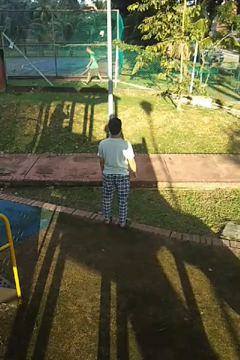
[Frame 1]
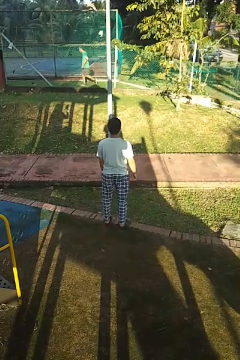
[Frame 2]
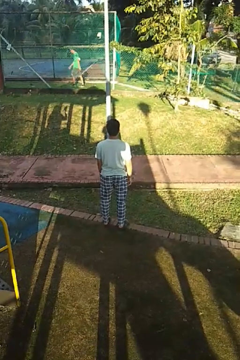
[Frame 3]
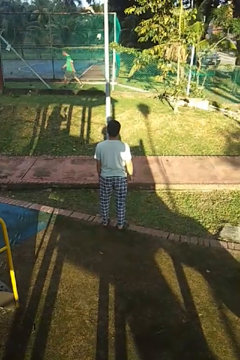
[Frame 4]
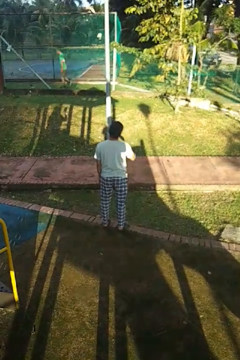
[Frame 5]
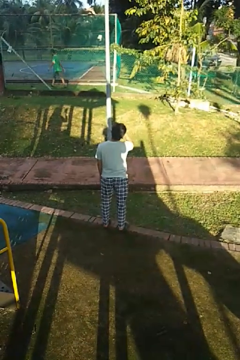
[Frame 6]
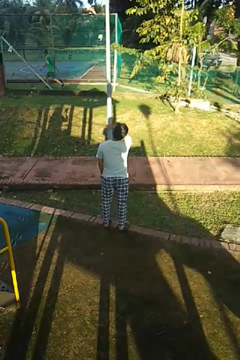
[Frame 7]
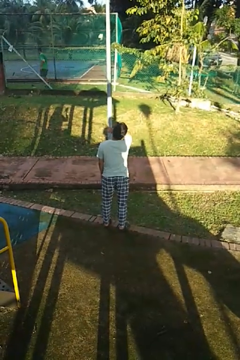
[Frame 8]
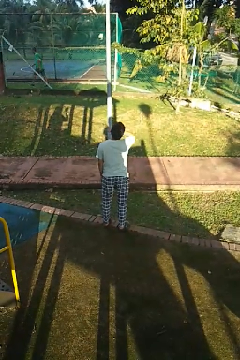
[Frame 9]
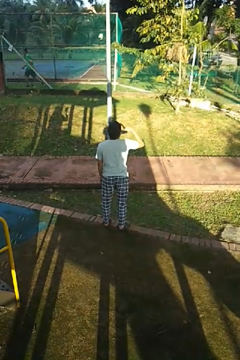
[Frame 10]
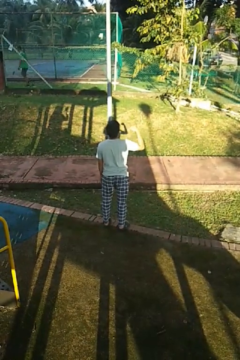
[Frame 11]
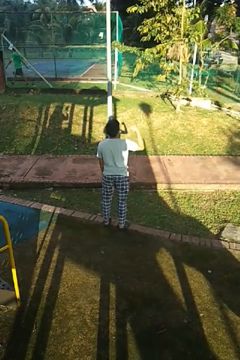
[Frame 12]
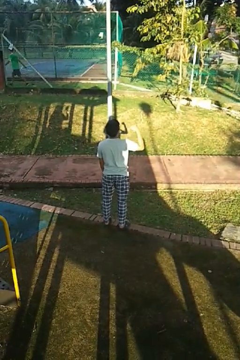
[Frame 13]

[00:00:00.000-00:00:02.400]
person gestures cut

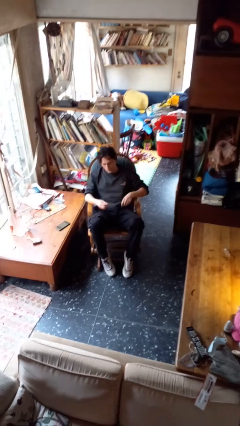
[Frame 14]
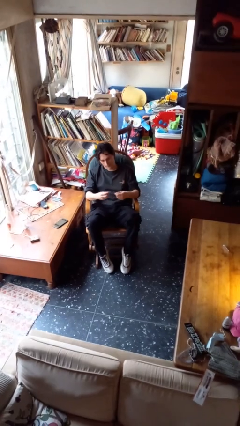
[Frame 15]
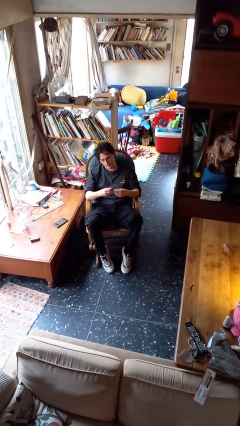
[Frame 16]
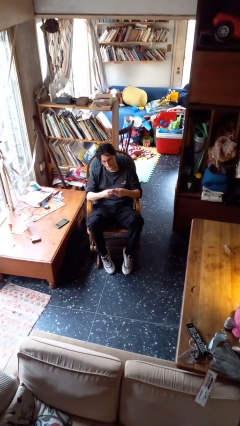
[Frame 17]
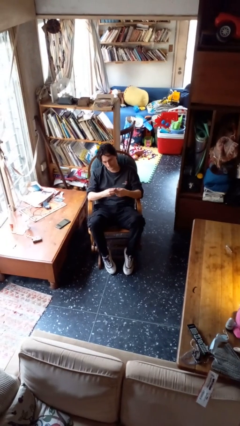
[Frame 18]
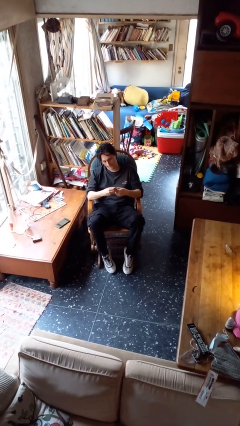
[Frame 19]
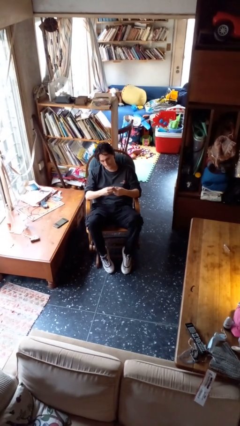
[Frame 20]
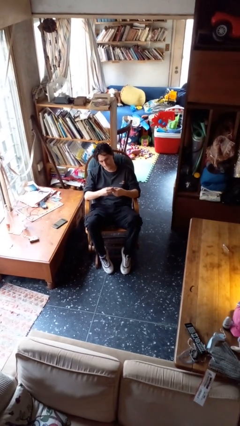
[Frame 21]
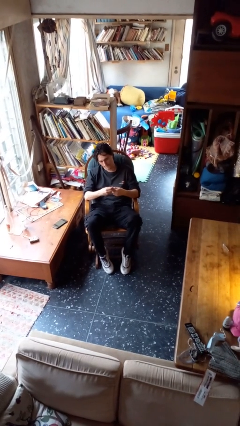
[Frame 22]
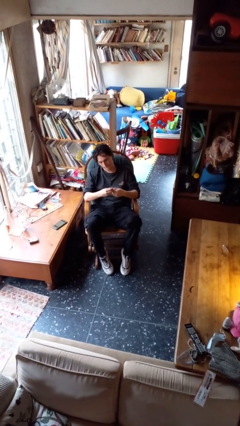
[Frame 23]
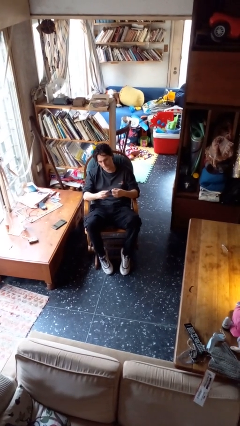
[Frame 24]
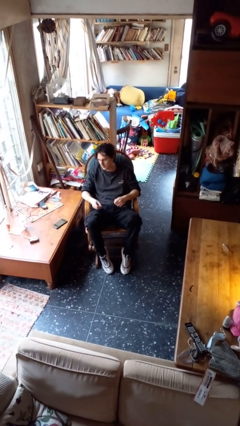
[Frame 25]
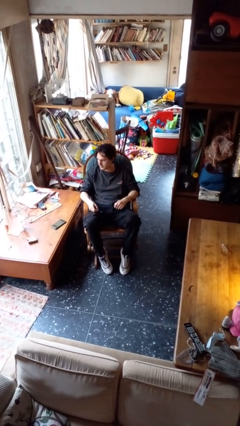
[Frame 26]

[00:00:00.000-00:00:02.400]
person files fingernails

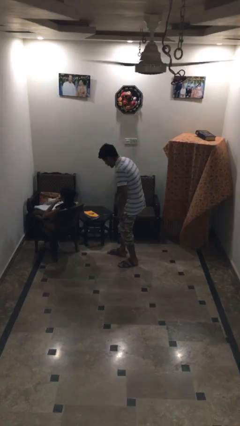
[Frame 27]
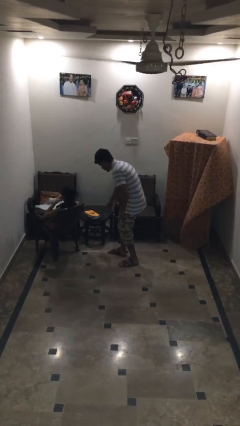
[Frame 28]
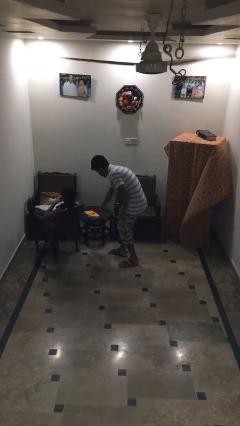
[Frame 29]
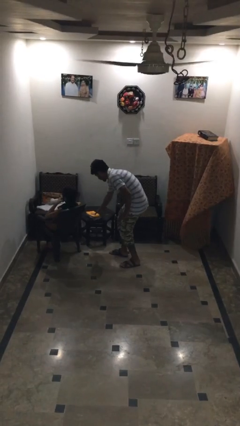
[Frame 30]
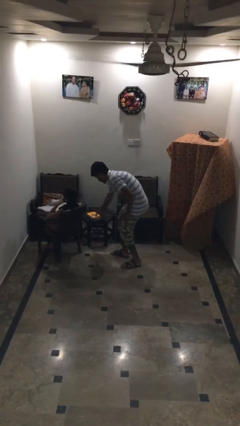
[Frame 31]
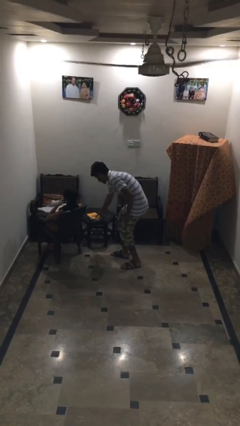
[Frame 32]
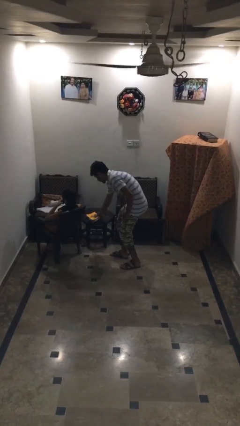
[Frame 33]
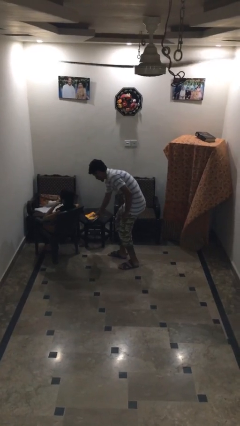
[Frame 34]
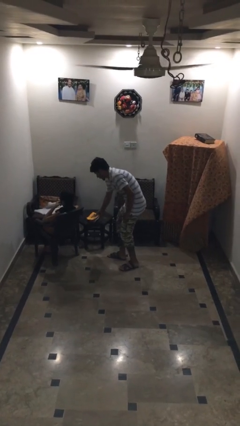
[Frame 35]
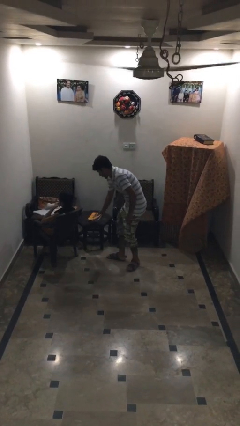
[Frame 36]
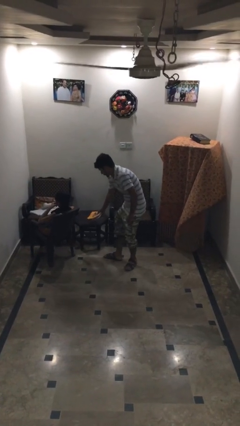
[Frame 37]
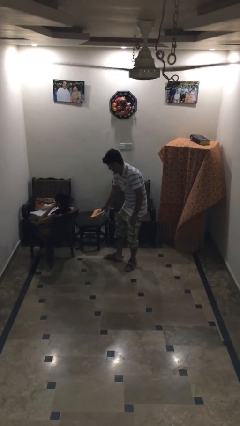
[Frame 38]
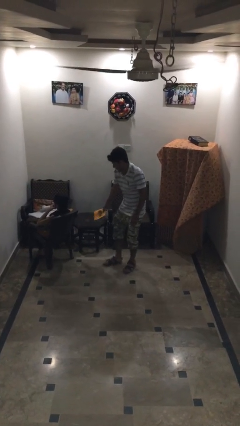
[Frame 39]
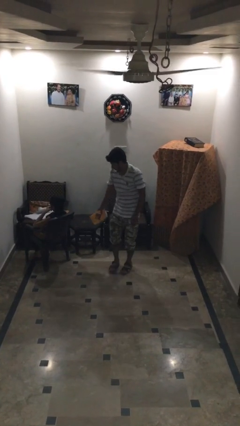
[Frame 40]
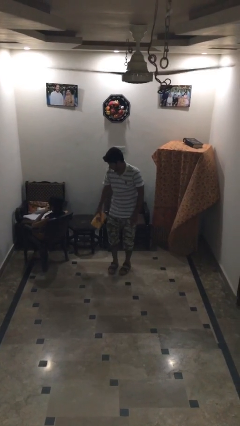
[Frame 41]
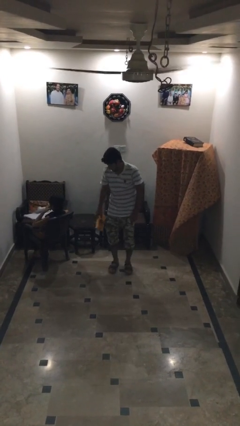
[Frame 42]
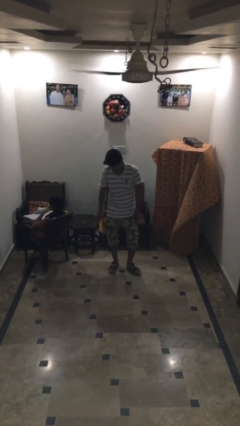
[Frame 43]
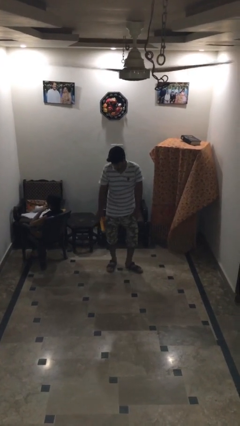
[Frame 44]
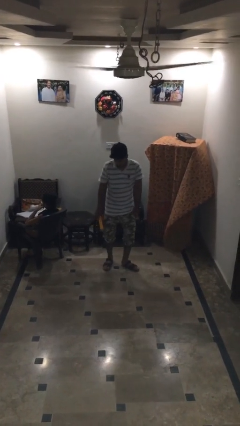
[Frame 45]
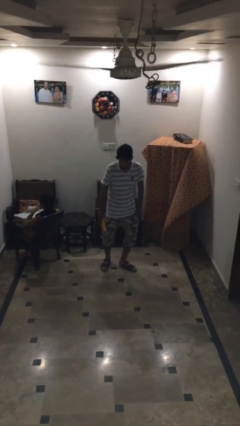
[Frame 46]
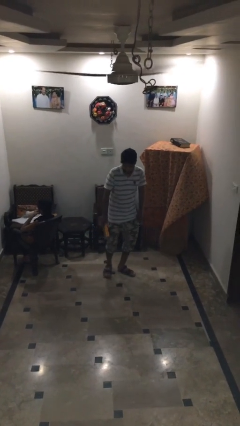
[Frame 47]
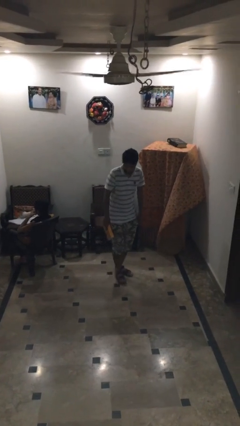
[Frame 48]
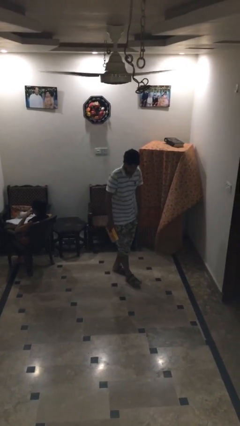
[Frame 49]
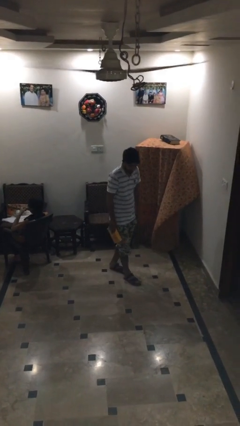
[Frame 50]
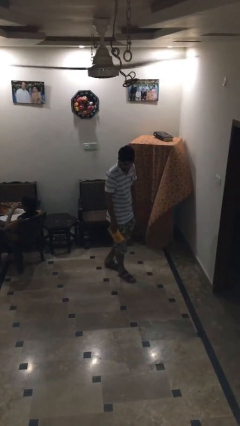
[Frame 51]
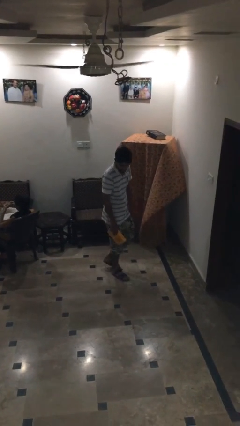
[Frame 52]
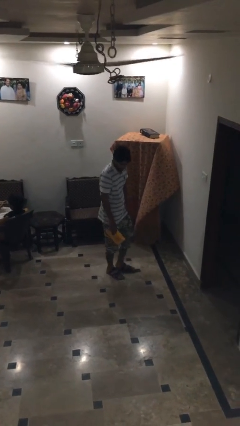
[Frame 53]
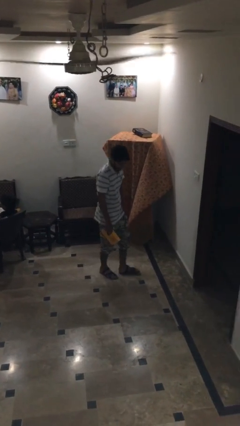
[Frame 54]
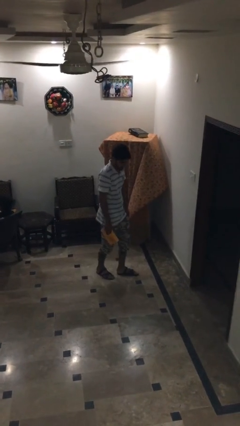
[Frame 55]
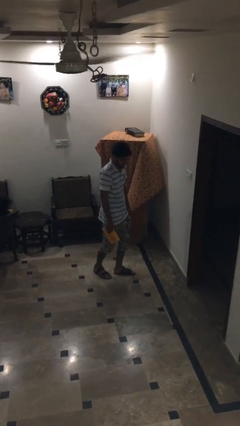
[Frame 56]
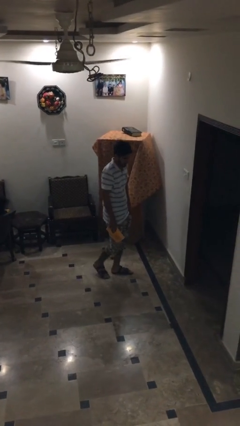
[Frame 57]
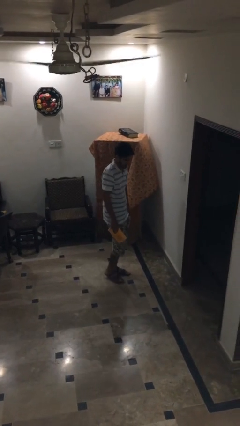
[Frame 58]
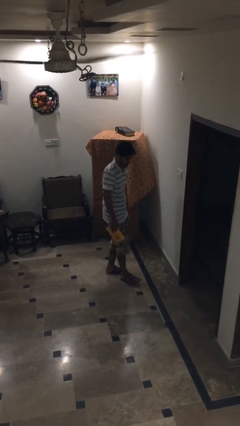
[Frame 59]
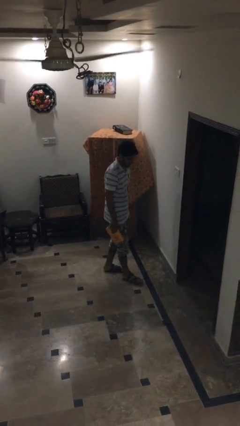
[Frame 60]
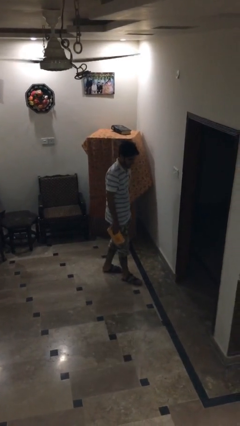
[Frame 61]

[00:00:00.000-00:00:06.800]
person steals object from person

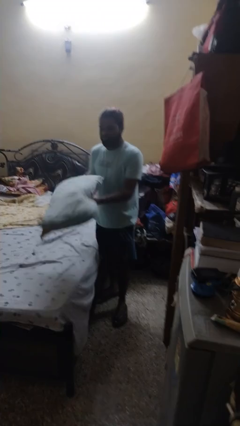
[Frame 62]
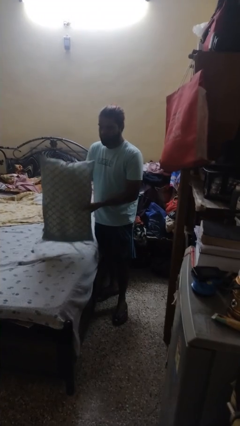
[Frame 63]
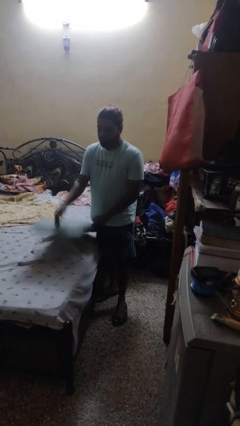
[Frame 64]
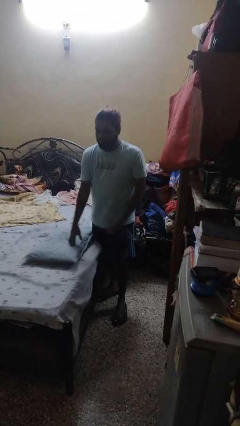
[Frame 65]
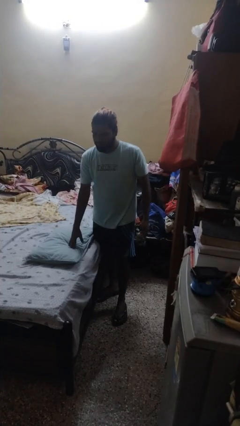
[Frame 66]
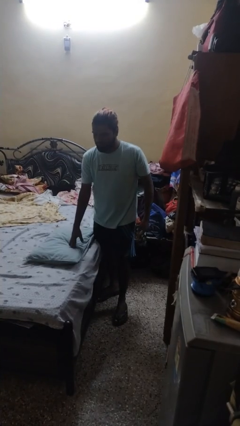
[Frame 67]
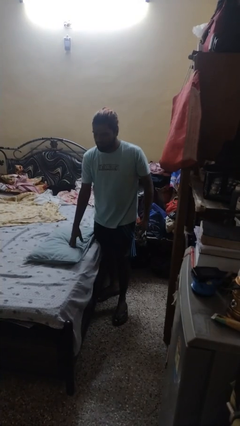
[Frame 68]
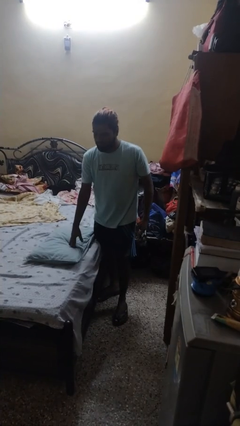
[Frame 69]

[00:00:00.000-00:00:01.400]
person puts down object on bed

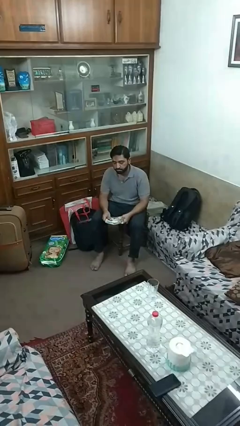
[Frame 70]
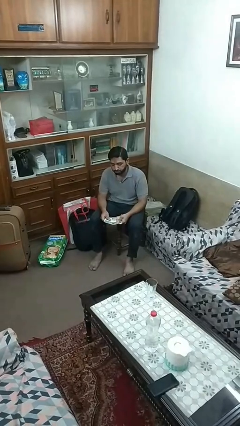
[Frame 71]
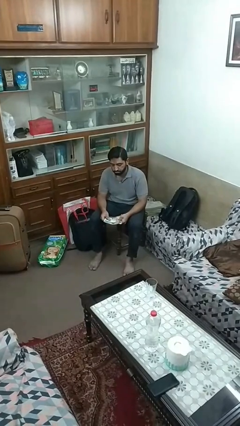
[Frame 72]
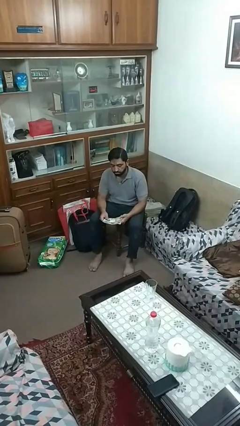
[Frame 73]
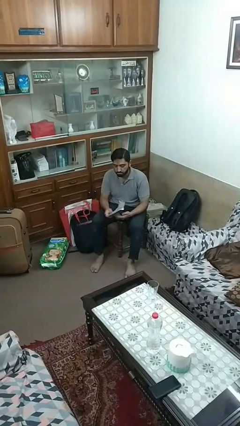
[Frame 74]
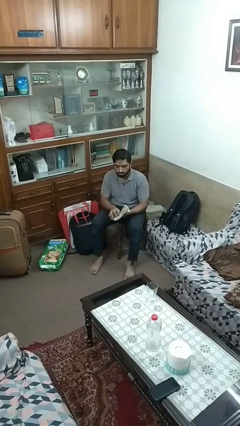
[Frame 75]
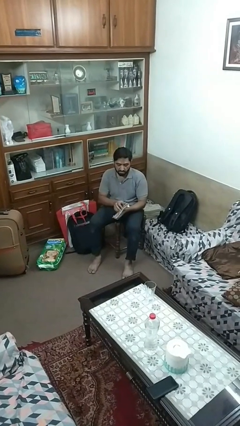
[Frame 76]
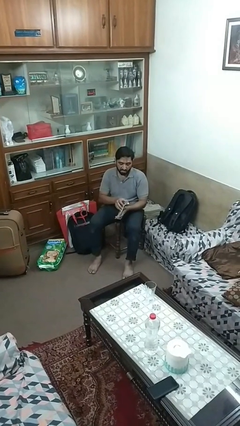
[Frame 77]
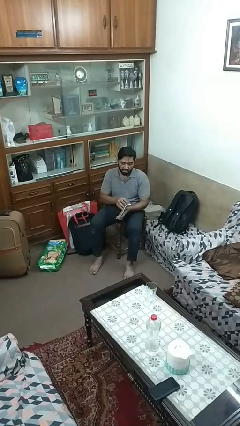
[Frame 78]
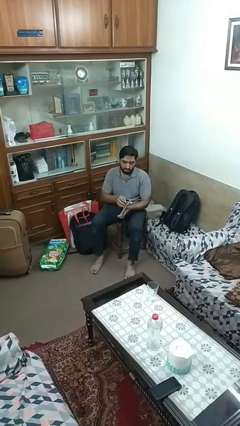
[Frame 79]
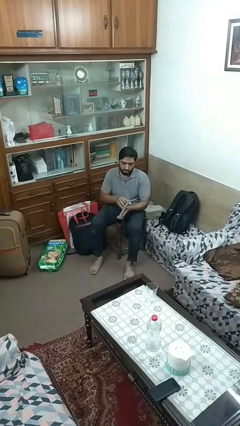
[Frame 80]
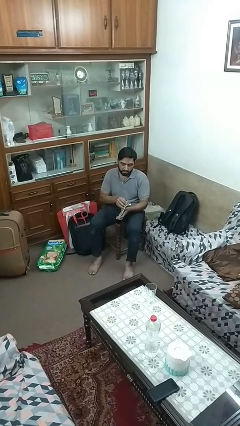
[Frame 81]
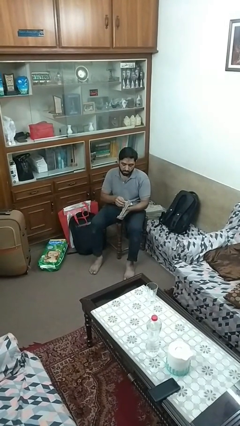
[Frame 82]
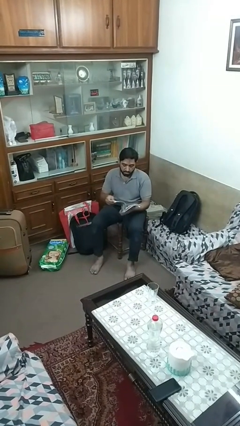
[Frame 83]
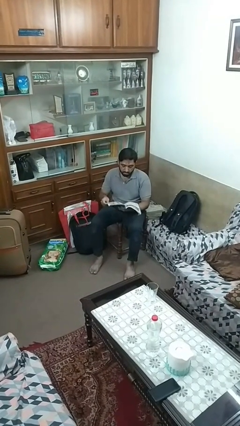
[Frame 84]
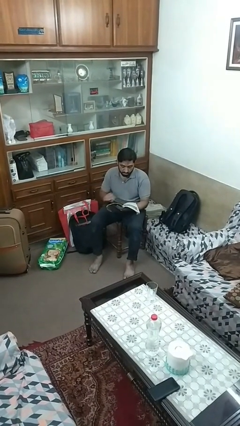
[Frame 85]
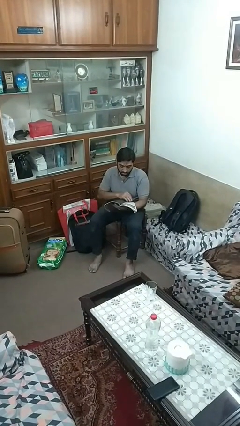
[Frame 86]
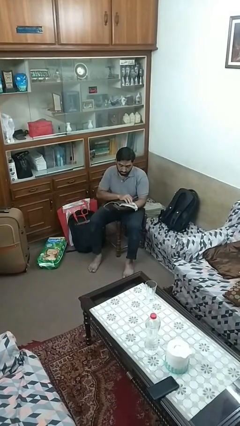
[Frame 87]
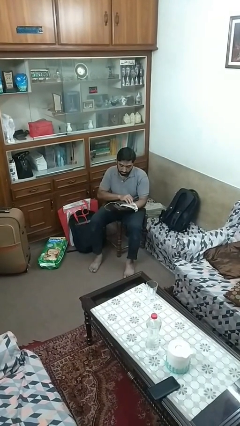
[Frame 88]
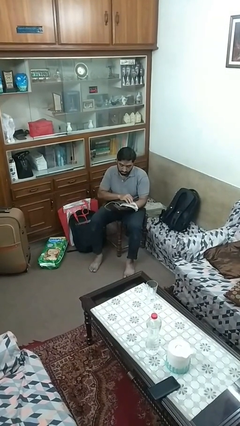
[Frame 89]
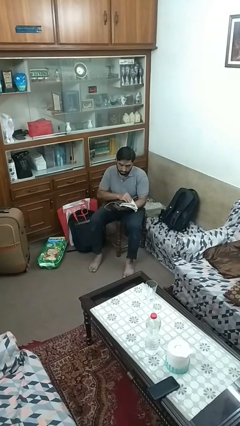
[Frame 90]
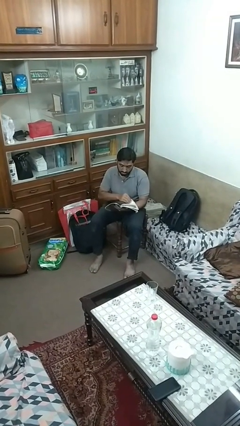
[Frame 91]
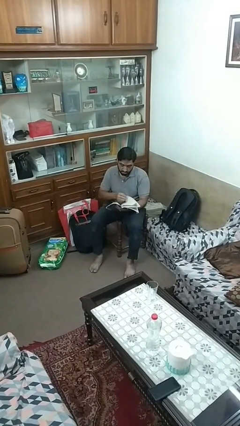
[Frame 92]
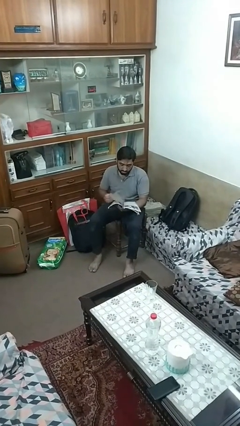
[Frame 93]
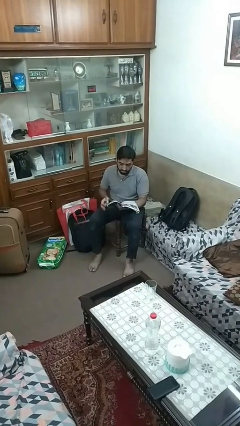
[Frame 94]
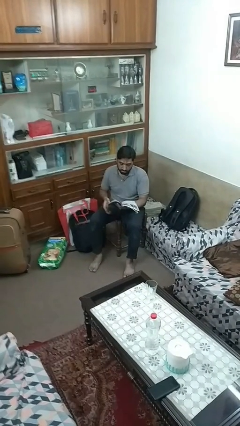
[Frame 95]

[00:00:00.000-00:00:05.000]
person reads magazine
